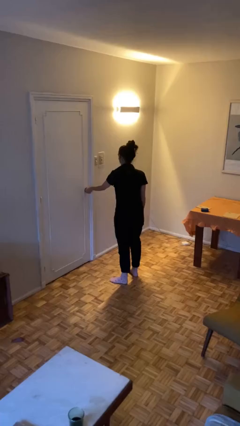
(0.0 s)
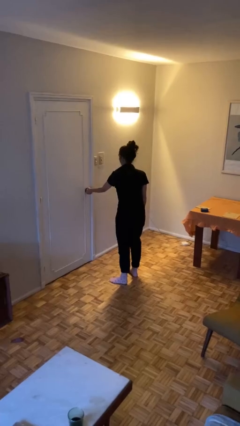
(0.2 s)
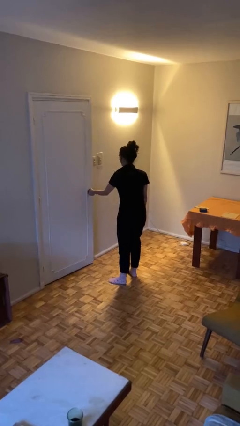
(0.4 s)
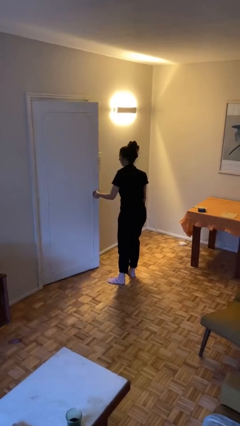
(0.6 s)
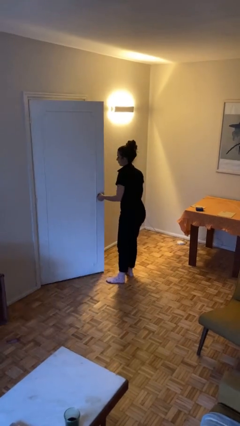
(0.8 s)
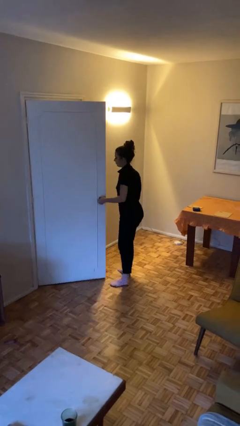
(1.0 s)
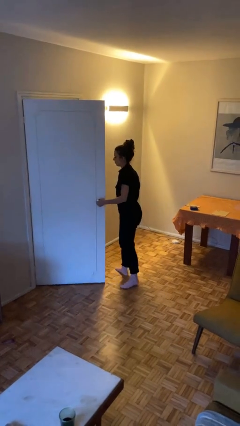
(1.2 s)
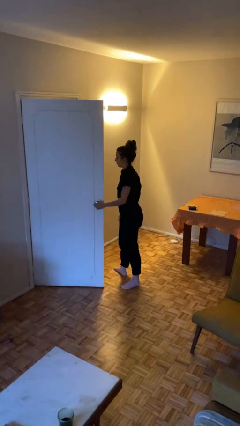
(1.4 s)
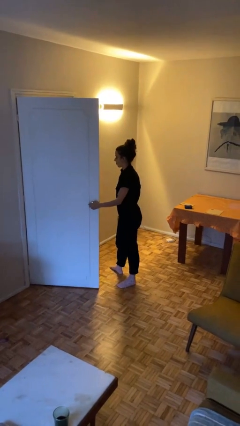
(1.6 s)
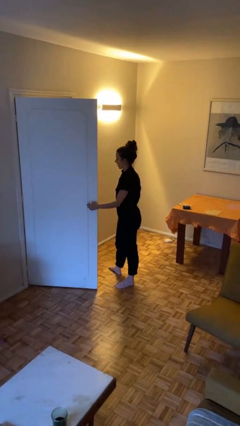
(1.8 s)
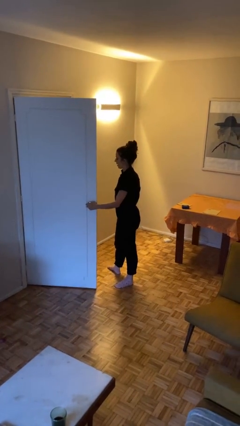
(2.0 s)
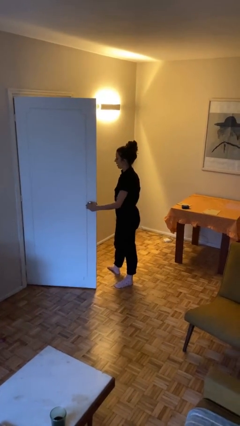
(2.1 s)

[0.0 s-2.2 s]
person opens facility door

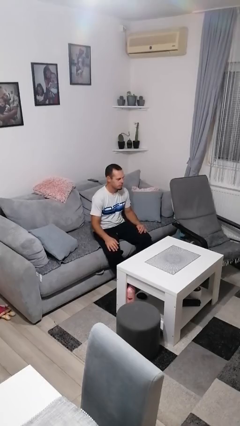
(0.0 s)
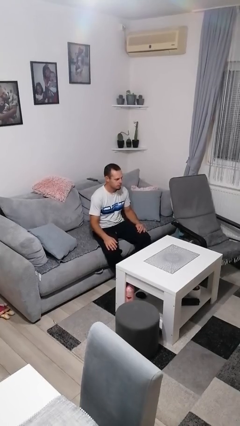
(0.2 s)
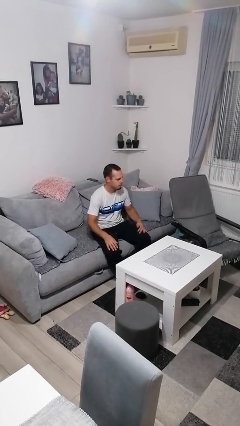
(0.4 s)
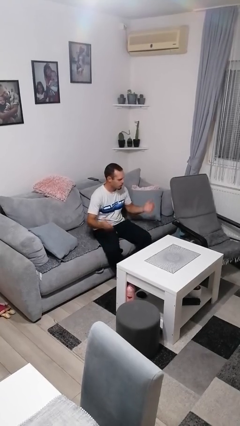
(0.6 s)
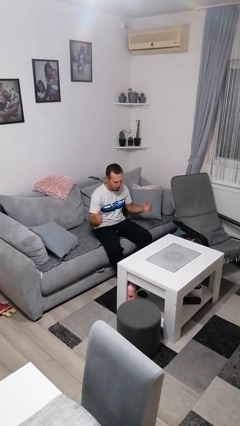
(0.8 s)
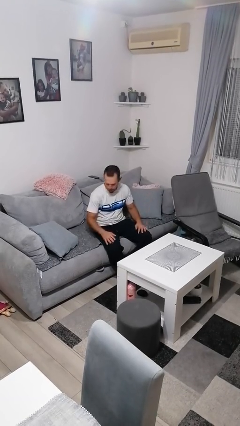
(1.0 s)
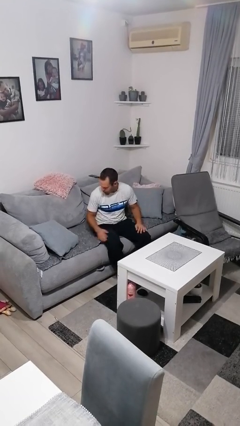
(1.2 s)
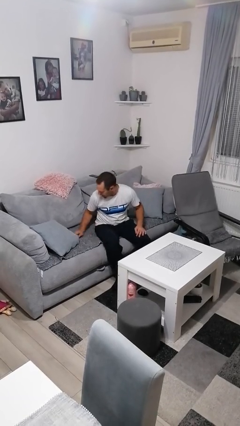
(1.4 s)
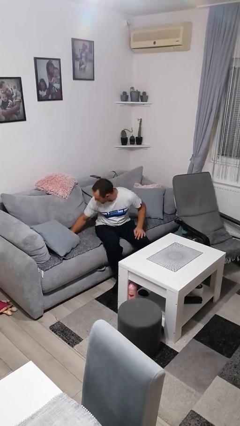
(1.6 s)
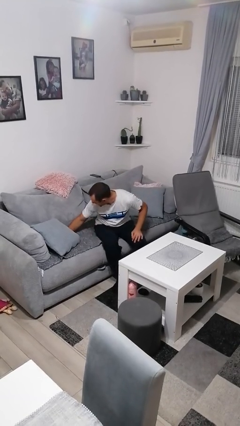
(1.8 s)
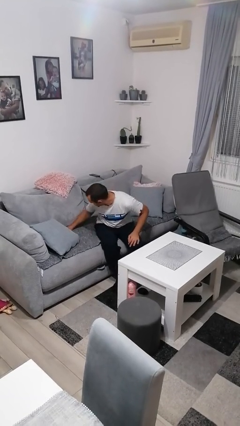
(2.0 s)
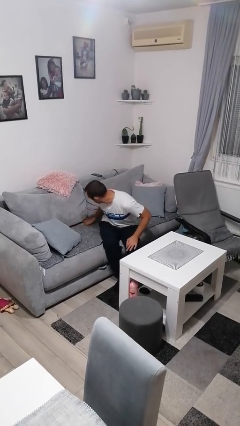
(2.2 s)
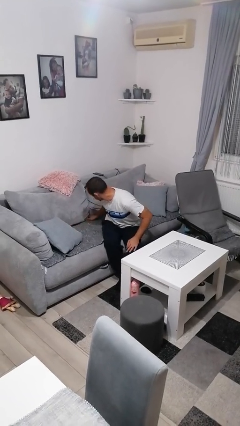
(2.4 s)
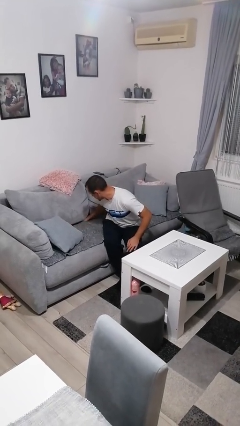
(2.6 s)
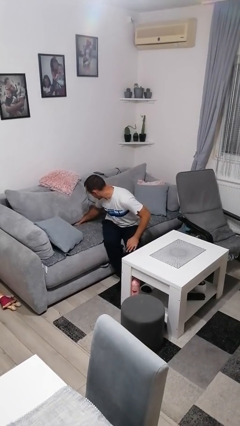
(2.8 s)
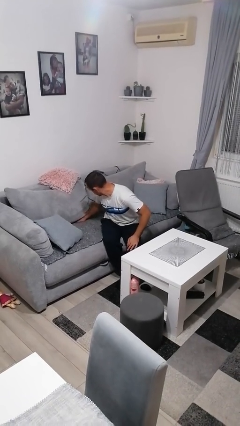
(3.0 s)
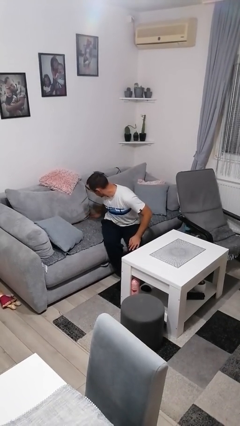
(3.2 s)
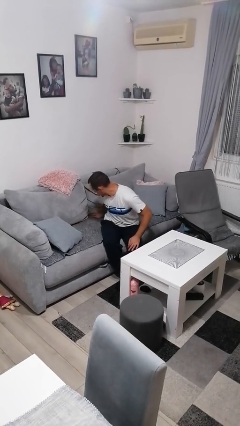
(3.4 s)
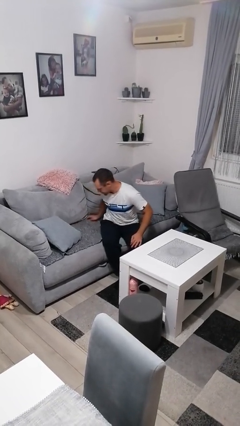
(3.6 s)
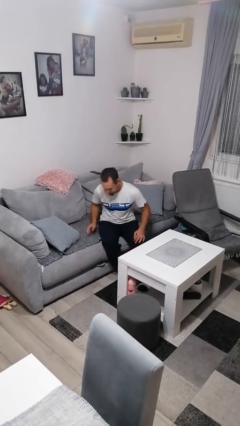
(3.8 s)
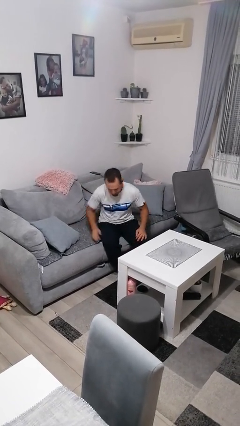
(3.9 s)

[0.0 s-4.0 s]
person searches in couch
